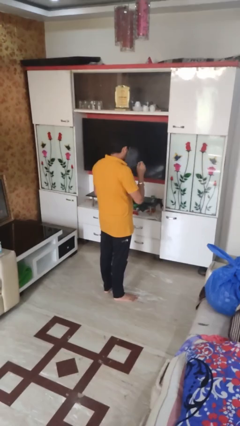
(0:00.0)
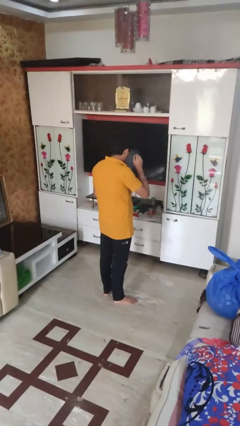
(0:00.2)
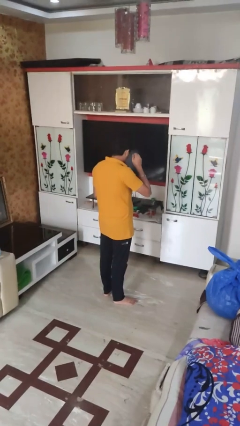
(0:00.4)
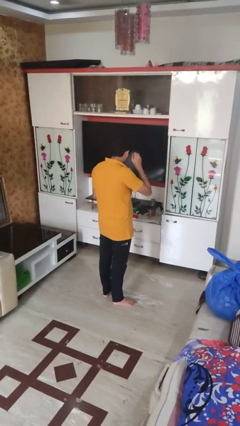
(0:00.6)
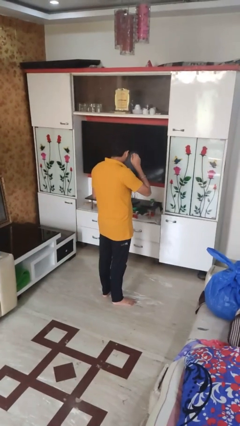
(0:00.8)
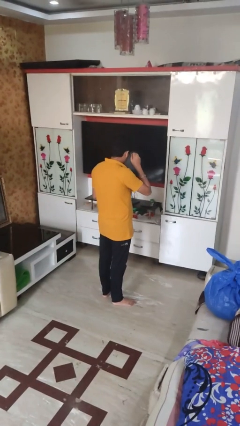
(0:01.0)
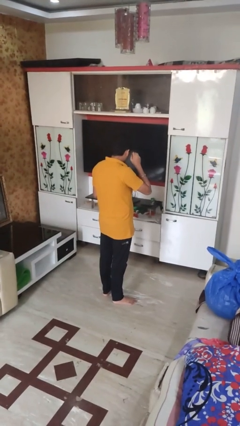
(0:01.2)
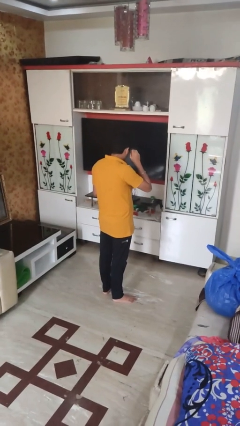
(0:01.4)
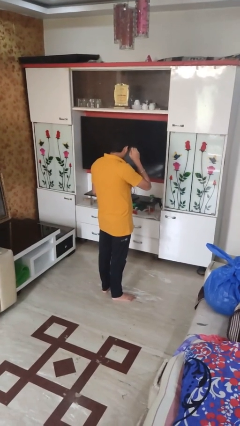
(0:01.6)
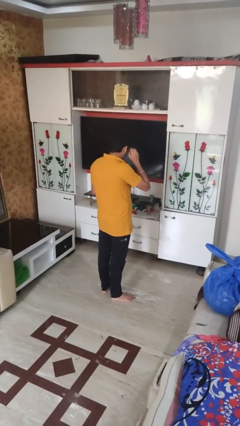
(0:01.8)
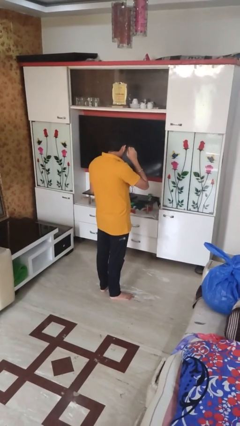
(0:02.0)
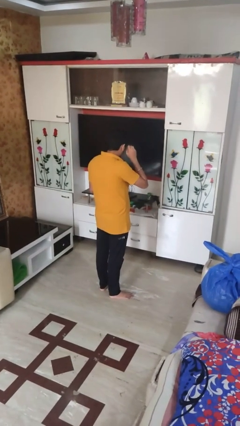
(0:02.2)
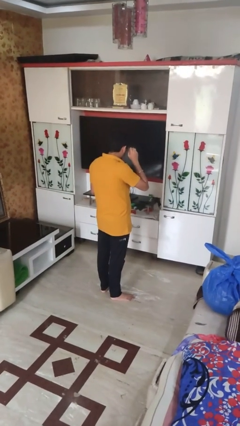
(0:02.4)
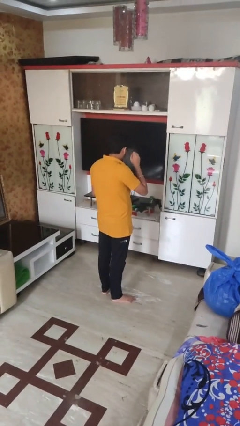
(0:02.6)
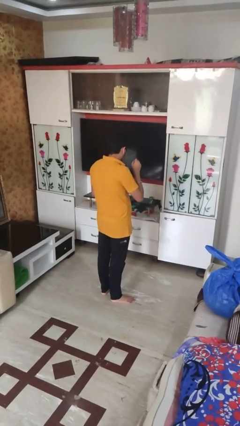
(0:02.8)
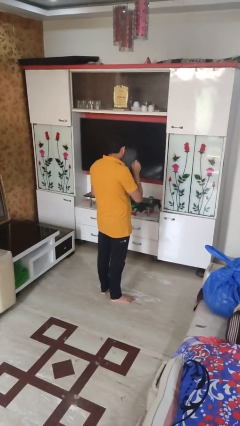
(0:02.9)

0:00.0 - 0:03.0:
person applies eye makeup

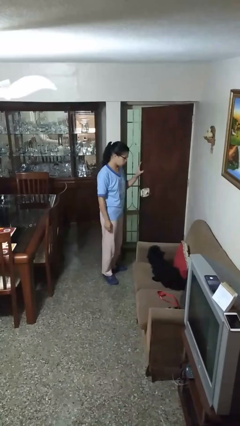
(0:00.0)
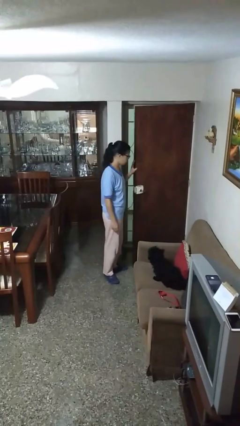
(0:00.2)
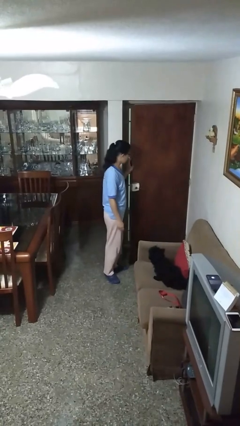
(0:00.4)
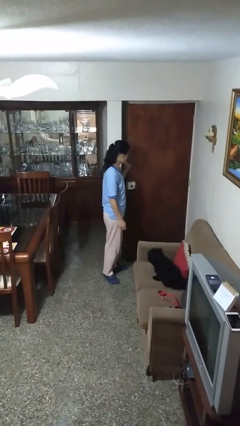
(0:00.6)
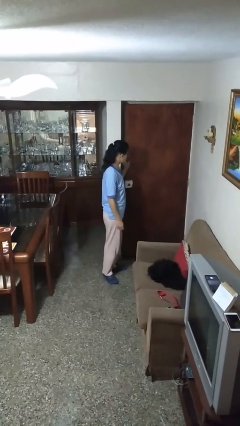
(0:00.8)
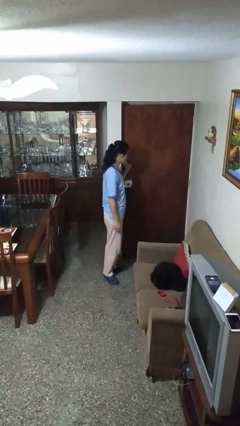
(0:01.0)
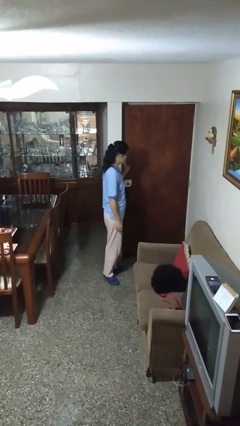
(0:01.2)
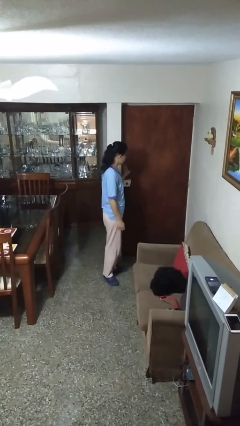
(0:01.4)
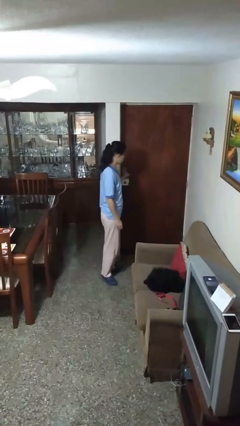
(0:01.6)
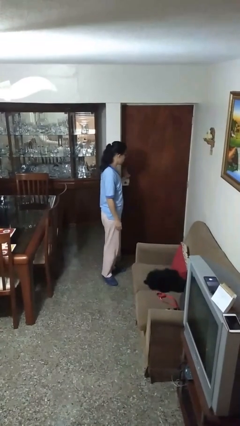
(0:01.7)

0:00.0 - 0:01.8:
person closes facility door

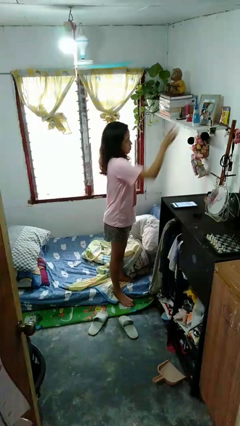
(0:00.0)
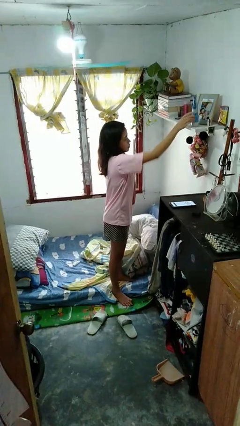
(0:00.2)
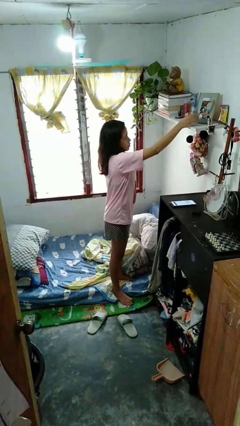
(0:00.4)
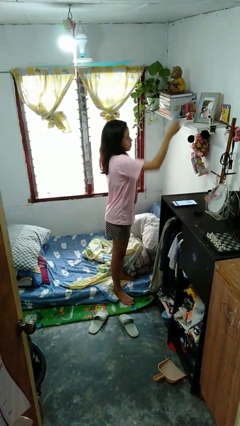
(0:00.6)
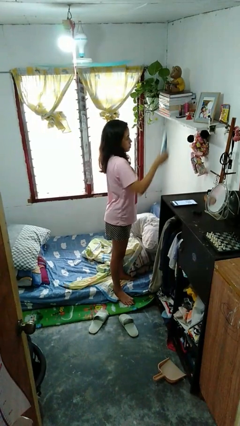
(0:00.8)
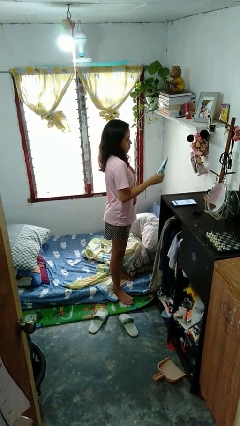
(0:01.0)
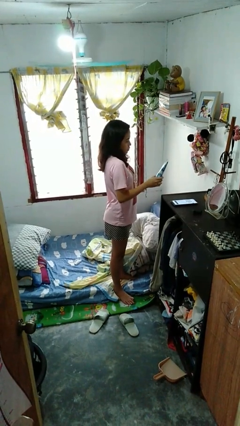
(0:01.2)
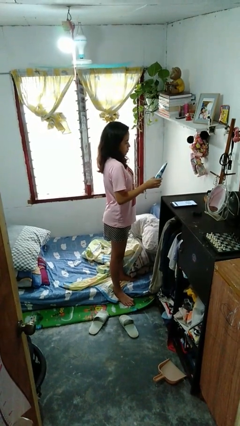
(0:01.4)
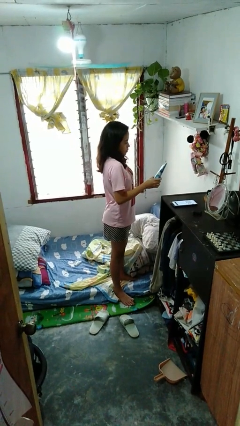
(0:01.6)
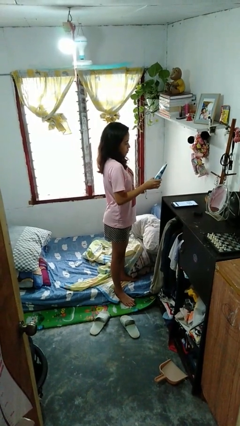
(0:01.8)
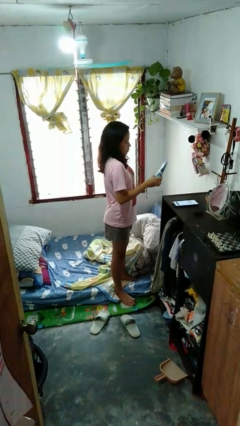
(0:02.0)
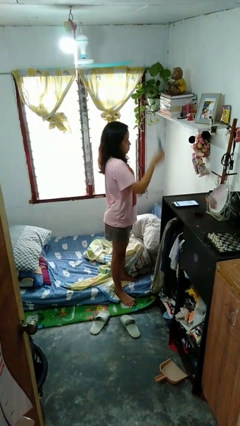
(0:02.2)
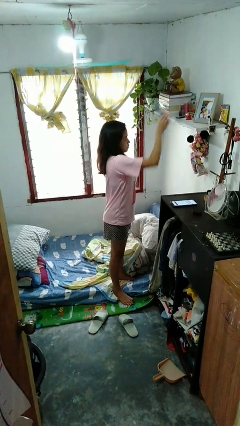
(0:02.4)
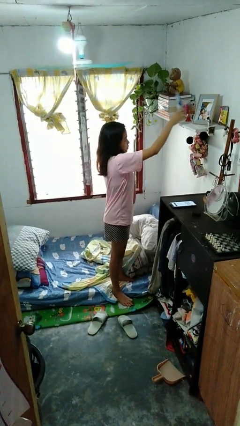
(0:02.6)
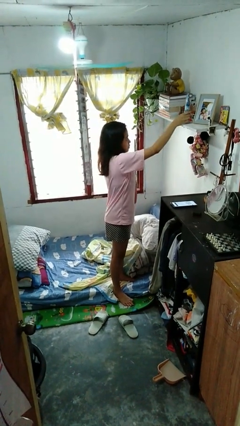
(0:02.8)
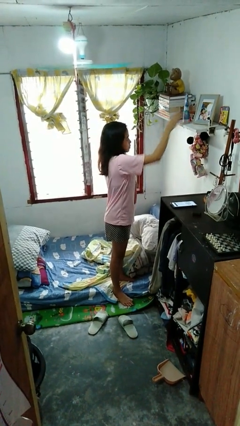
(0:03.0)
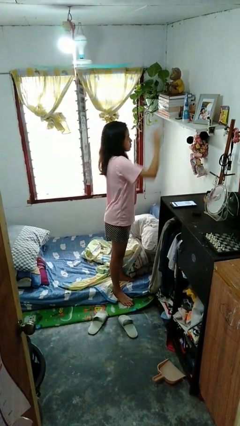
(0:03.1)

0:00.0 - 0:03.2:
person applies foundation makeup

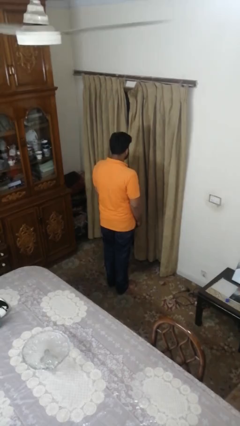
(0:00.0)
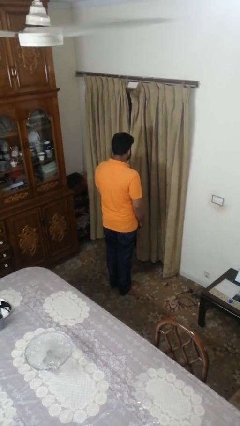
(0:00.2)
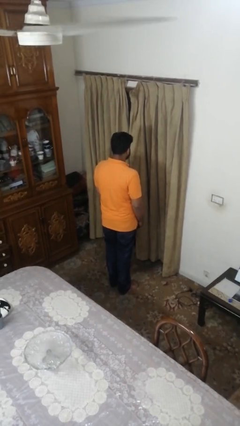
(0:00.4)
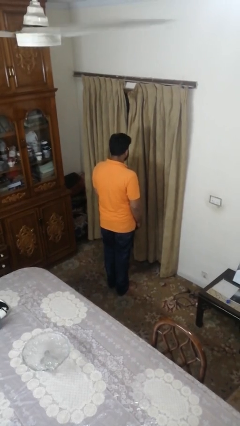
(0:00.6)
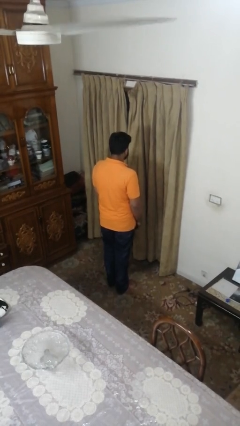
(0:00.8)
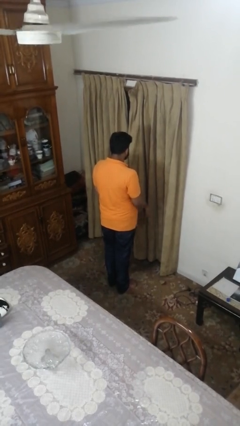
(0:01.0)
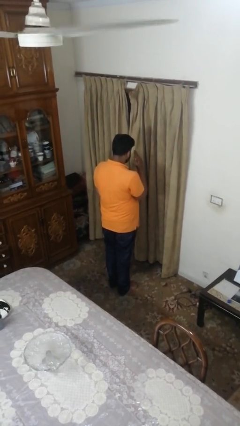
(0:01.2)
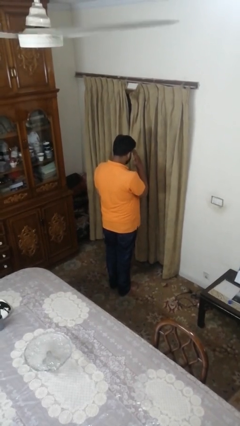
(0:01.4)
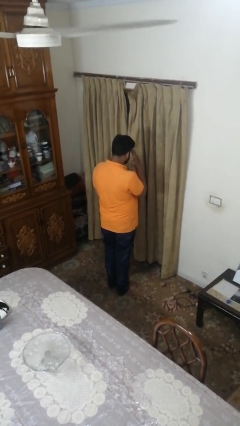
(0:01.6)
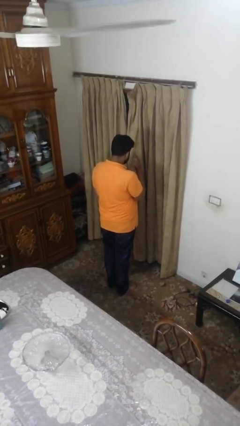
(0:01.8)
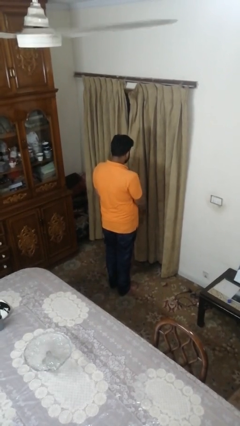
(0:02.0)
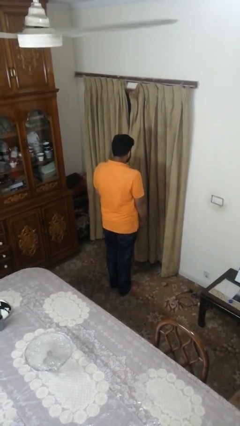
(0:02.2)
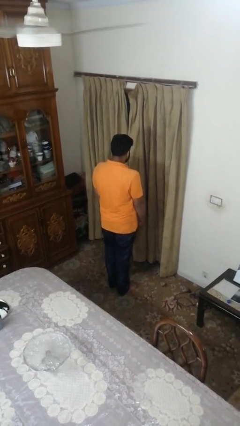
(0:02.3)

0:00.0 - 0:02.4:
person salutes

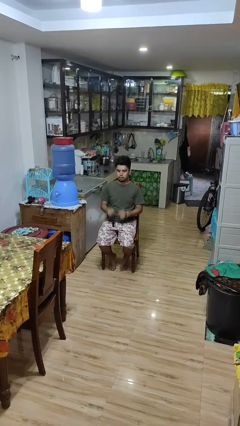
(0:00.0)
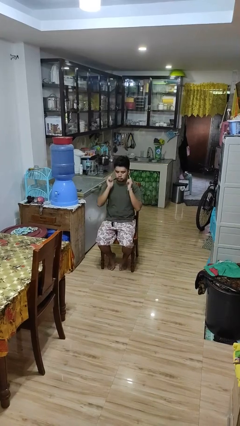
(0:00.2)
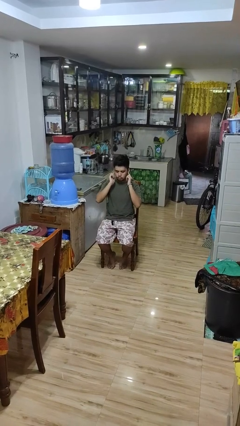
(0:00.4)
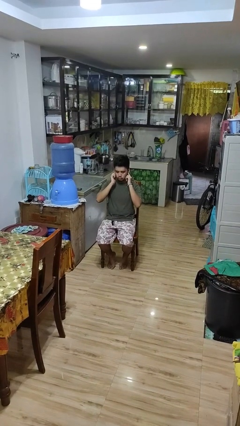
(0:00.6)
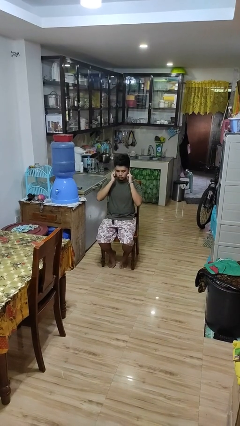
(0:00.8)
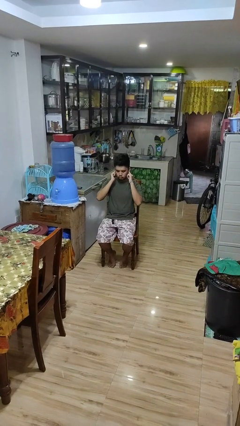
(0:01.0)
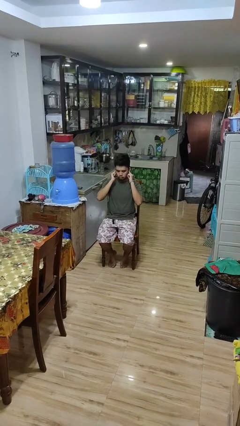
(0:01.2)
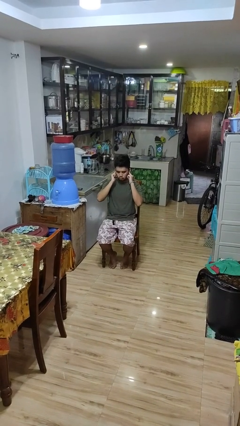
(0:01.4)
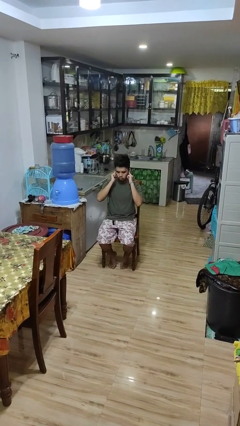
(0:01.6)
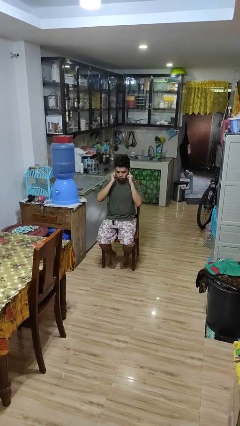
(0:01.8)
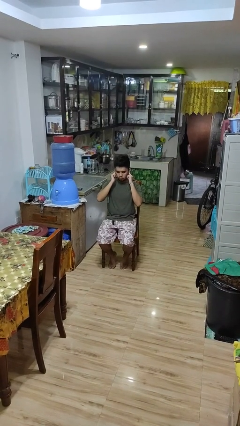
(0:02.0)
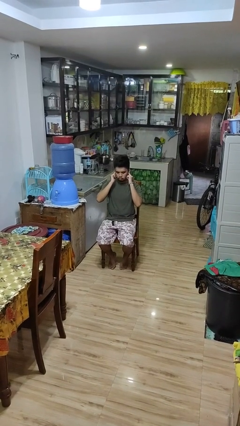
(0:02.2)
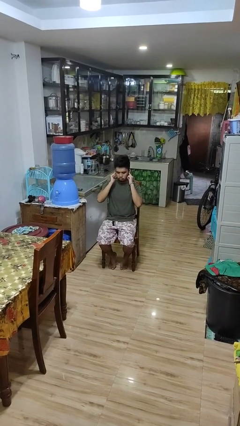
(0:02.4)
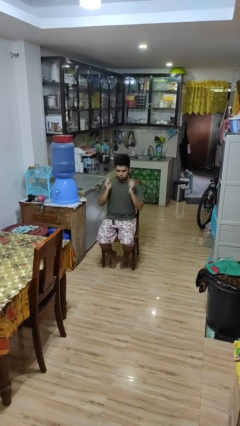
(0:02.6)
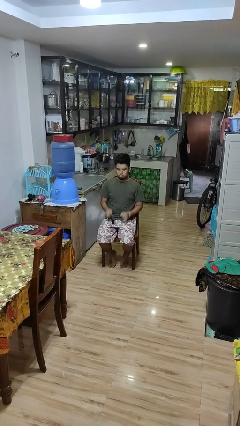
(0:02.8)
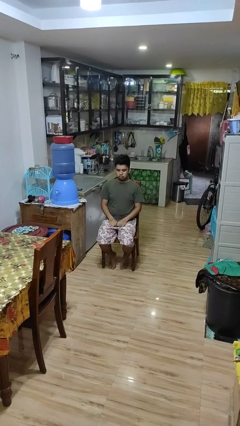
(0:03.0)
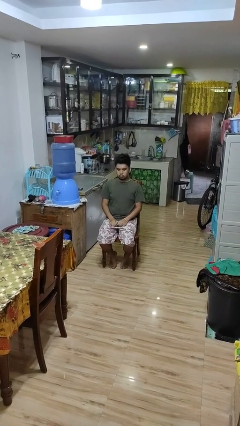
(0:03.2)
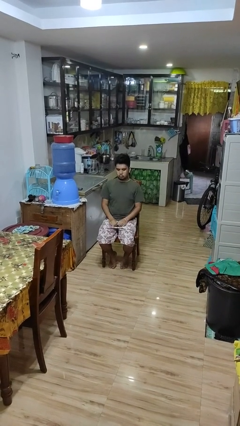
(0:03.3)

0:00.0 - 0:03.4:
person puts fingers in ear

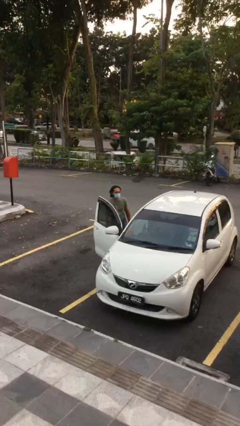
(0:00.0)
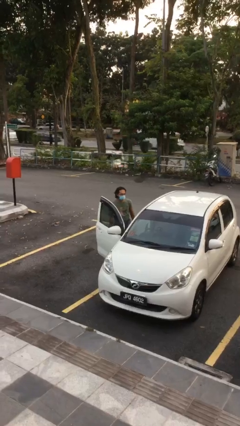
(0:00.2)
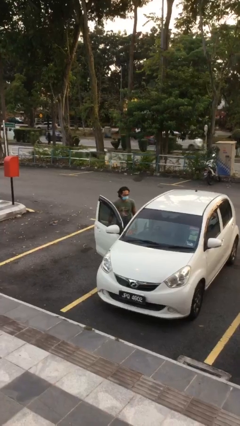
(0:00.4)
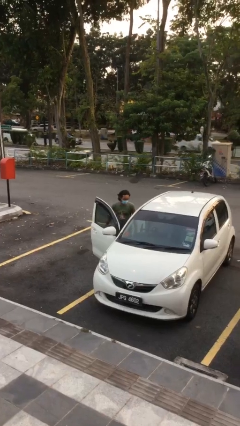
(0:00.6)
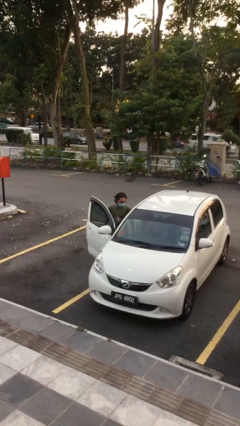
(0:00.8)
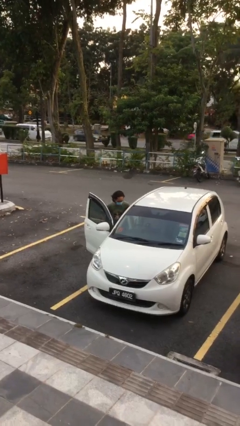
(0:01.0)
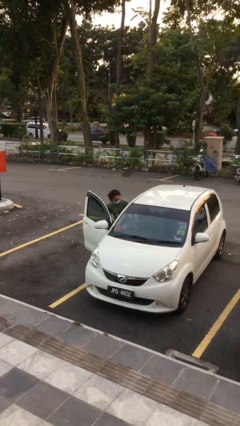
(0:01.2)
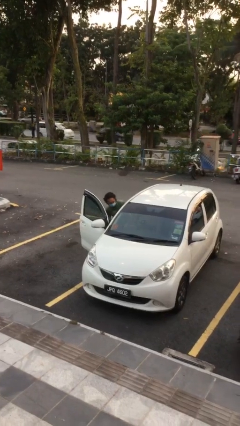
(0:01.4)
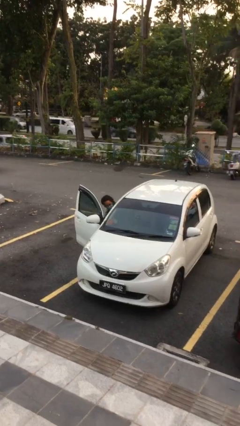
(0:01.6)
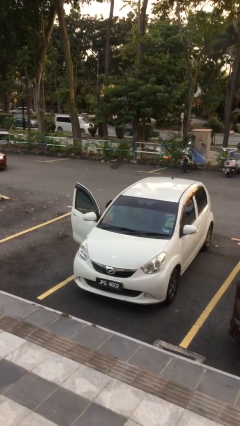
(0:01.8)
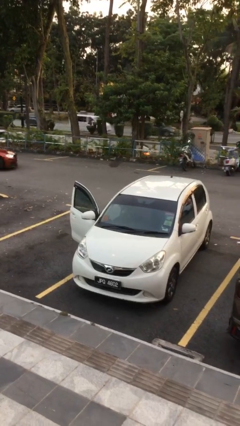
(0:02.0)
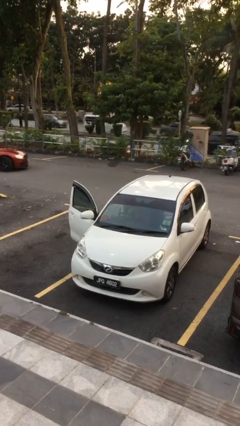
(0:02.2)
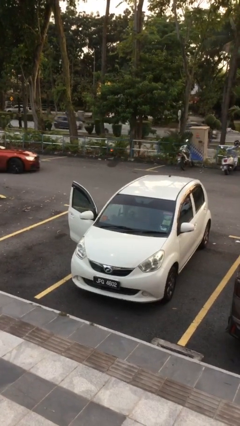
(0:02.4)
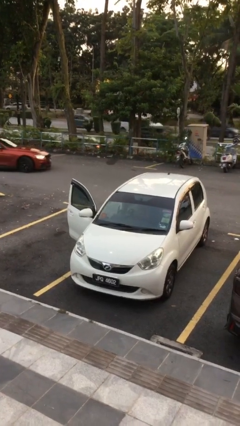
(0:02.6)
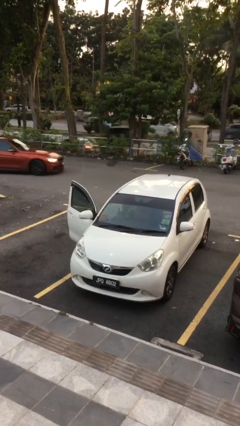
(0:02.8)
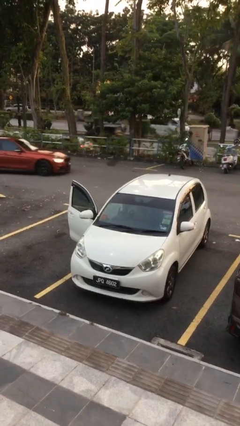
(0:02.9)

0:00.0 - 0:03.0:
person enters car

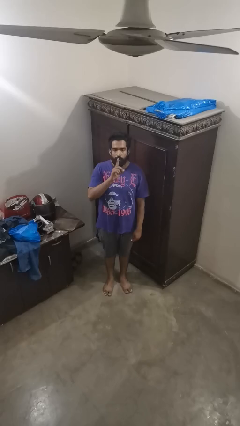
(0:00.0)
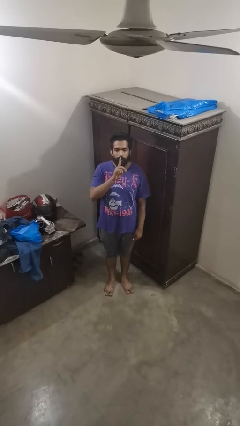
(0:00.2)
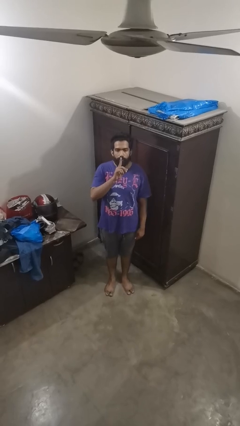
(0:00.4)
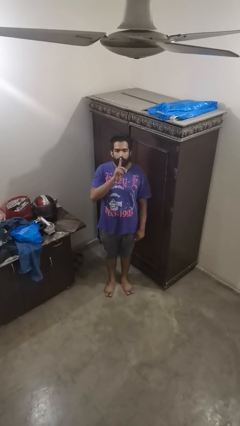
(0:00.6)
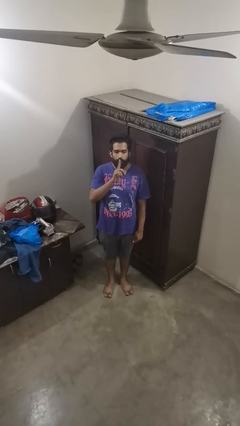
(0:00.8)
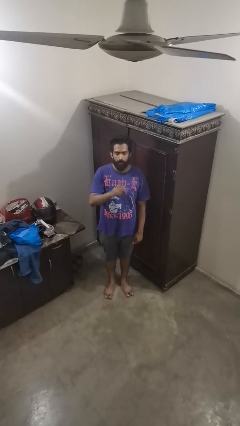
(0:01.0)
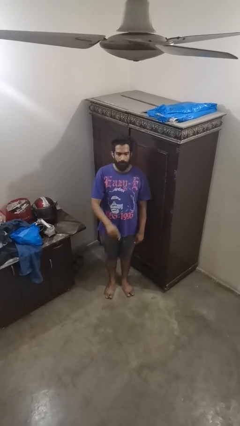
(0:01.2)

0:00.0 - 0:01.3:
person gestures be quiet
